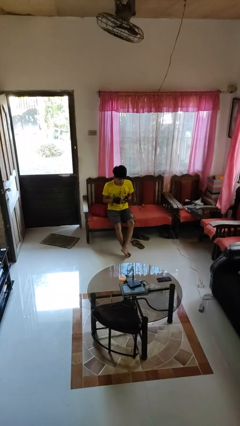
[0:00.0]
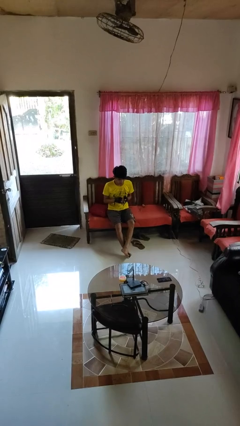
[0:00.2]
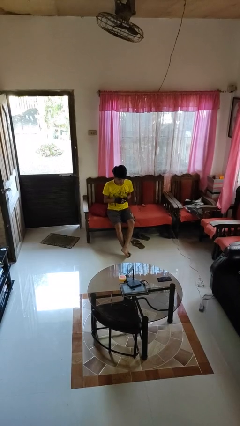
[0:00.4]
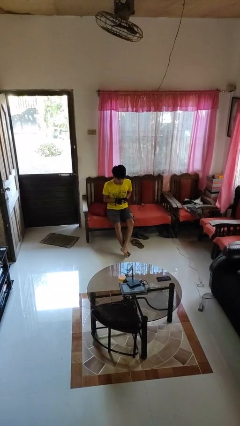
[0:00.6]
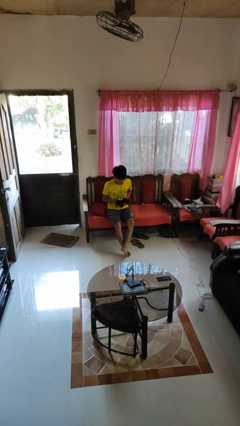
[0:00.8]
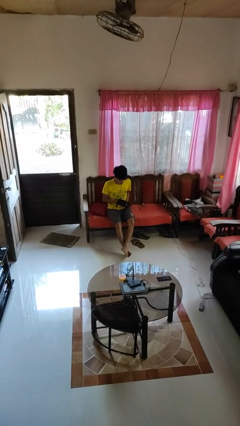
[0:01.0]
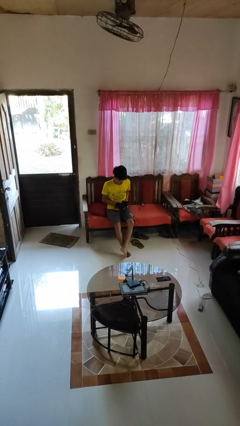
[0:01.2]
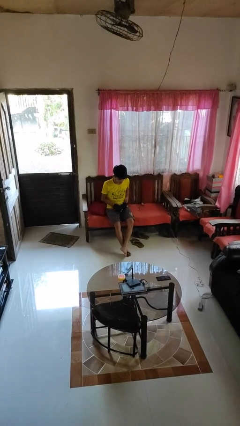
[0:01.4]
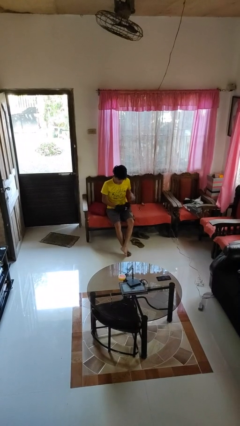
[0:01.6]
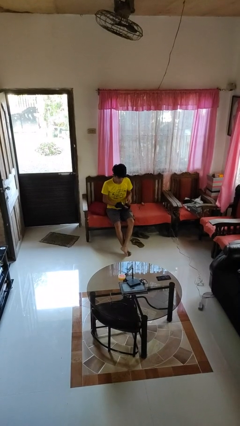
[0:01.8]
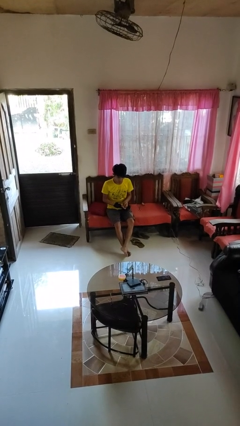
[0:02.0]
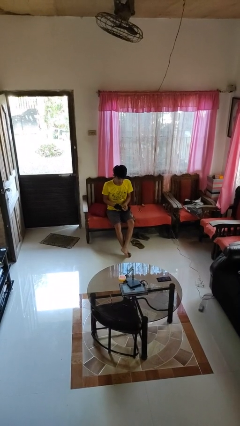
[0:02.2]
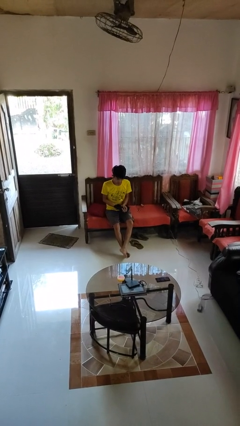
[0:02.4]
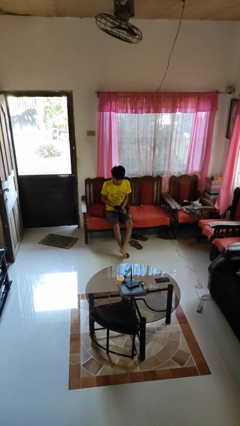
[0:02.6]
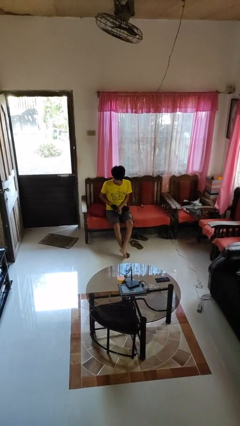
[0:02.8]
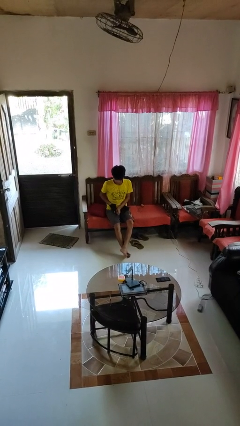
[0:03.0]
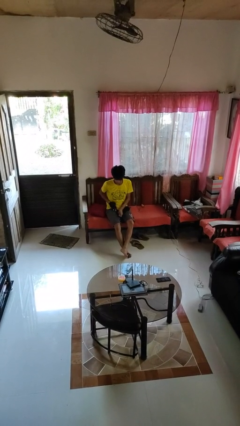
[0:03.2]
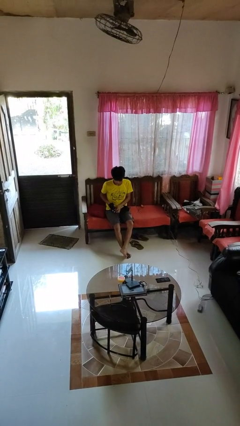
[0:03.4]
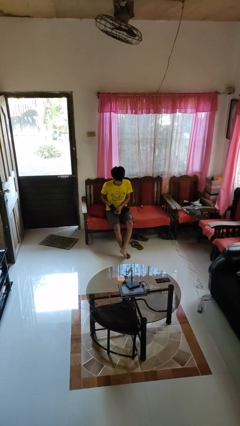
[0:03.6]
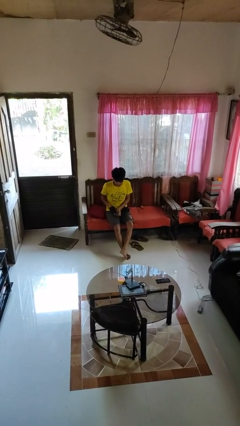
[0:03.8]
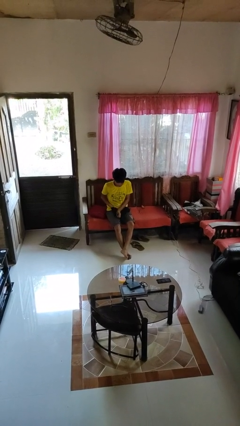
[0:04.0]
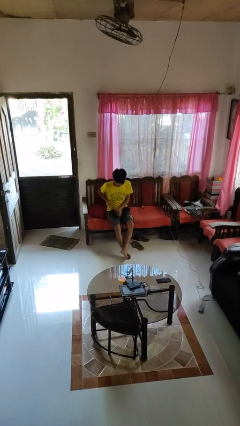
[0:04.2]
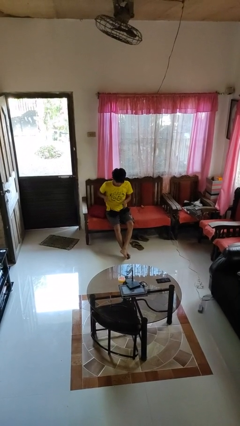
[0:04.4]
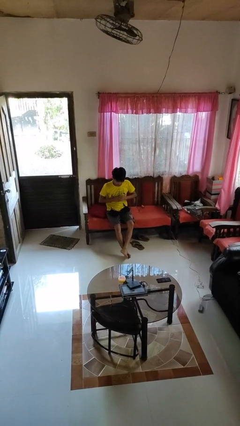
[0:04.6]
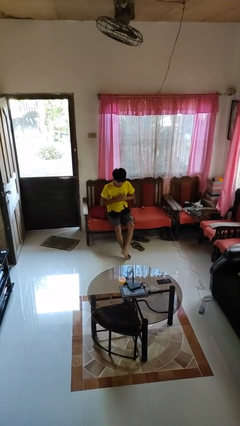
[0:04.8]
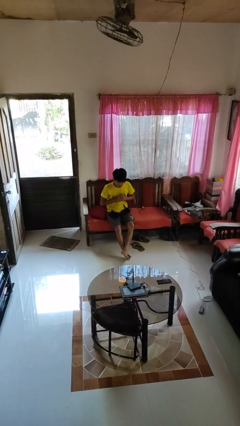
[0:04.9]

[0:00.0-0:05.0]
person takes off gloves

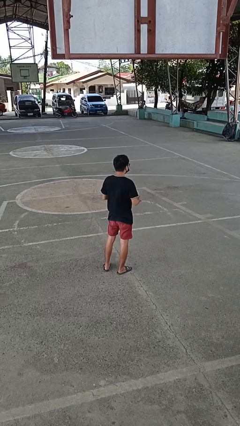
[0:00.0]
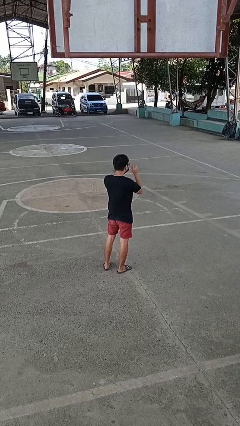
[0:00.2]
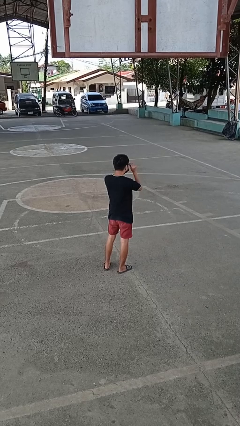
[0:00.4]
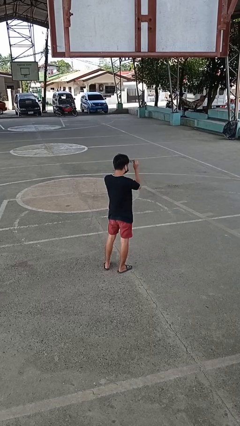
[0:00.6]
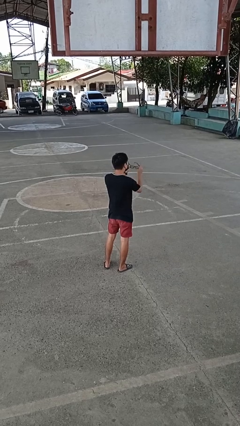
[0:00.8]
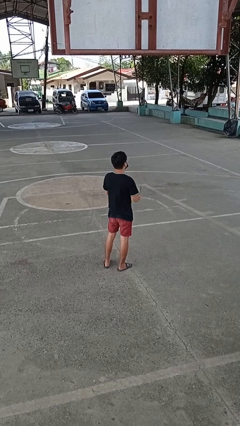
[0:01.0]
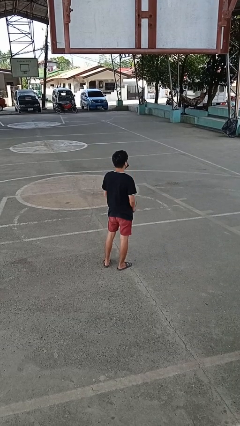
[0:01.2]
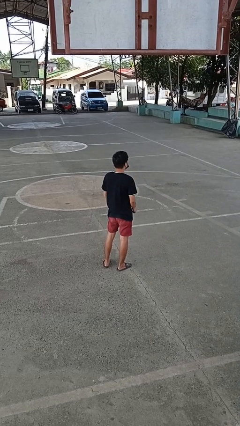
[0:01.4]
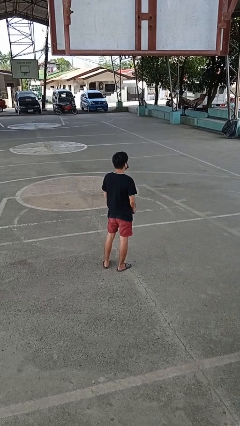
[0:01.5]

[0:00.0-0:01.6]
person takes off glasses

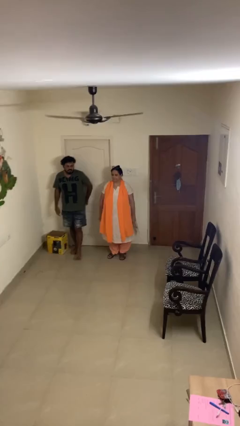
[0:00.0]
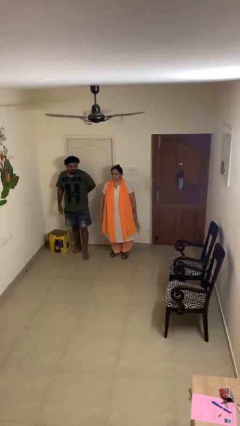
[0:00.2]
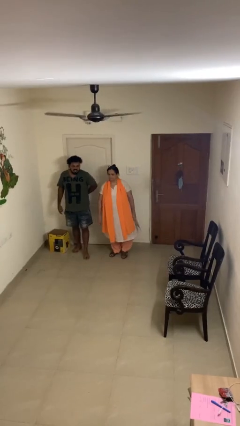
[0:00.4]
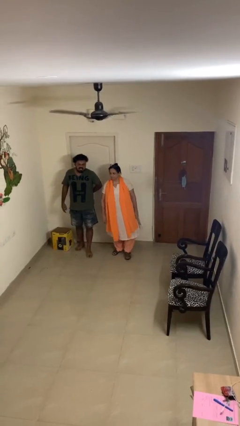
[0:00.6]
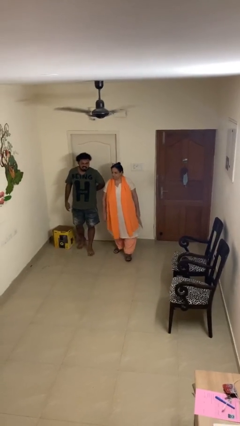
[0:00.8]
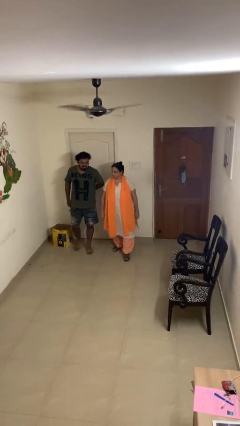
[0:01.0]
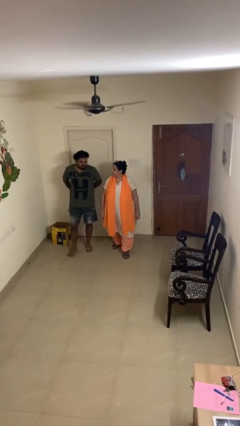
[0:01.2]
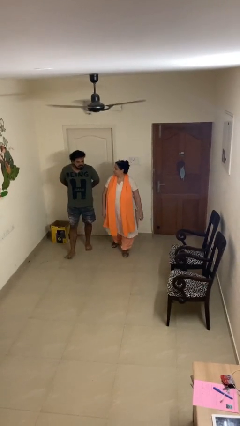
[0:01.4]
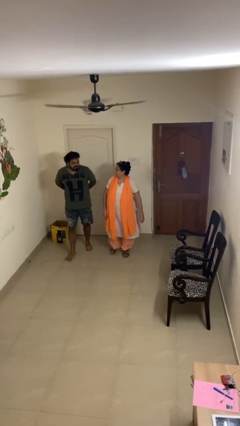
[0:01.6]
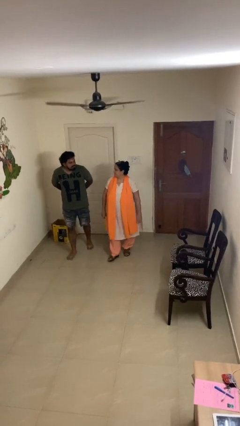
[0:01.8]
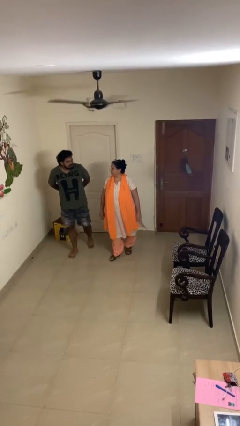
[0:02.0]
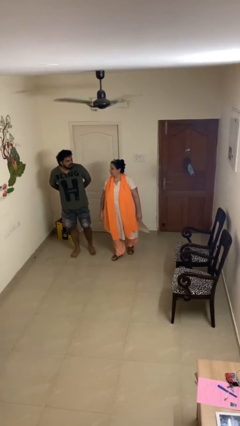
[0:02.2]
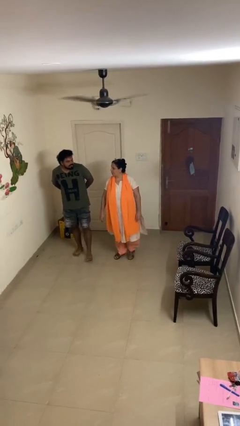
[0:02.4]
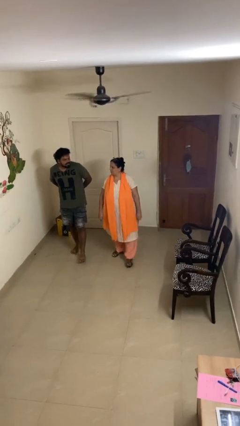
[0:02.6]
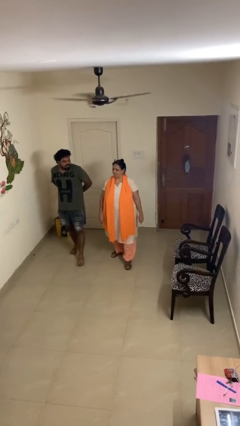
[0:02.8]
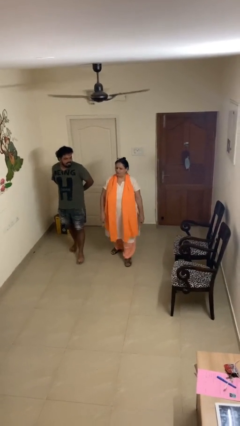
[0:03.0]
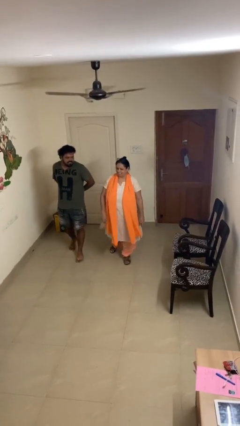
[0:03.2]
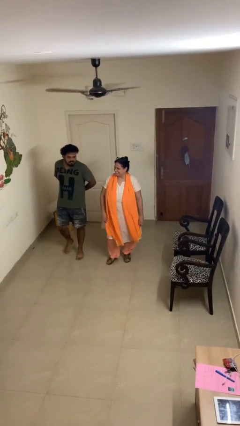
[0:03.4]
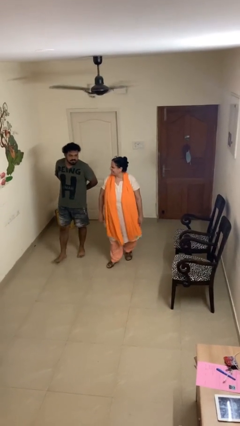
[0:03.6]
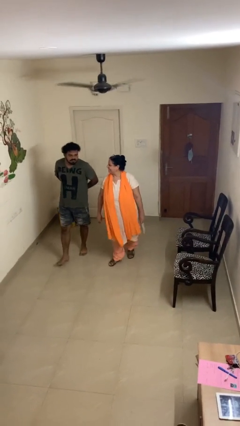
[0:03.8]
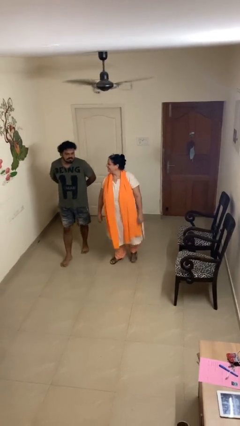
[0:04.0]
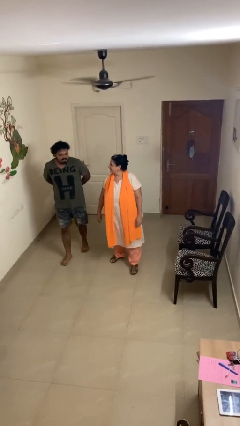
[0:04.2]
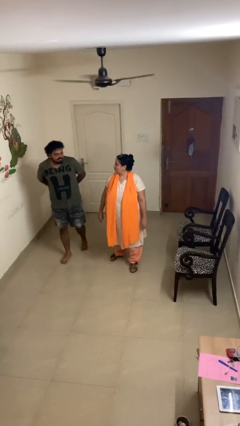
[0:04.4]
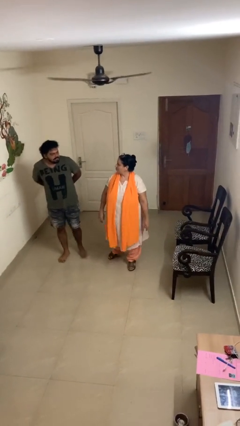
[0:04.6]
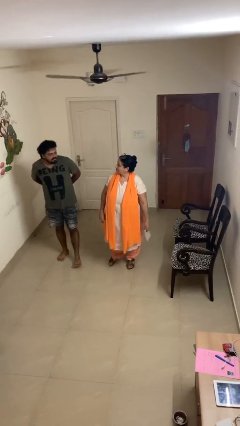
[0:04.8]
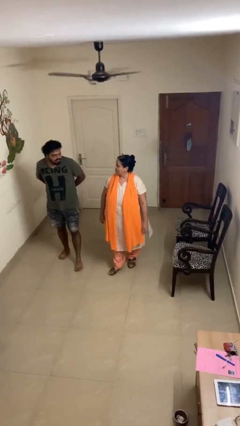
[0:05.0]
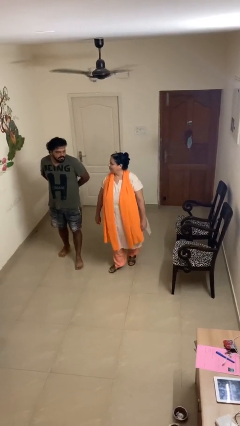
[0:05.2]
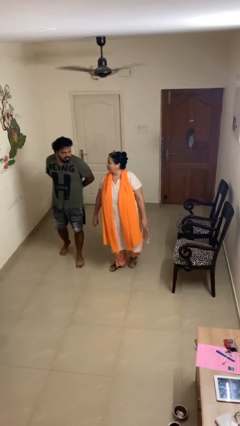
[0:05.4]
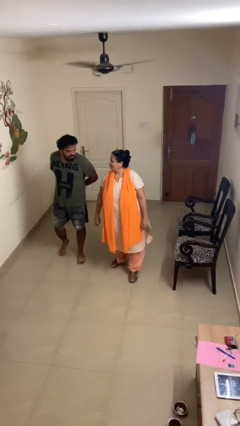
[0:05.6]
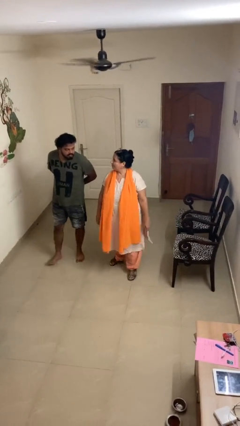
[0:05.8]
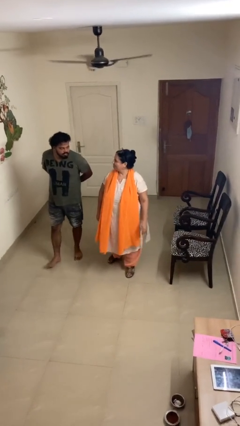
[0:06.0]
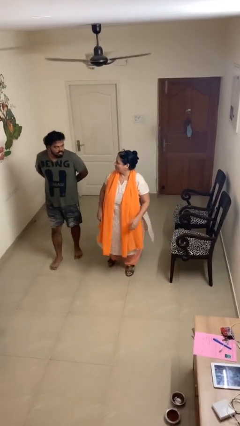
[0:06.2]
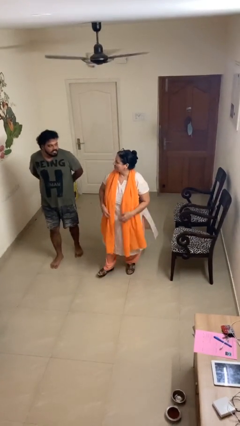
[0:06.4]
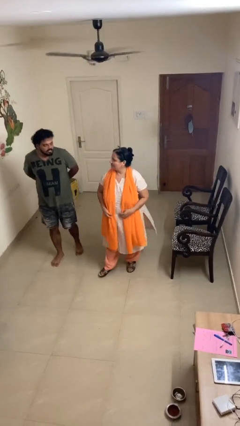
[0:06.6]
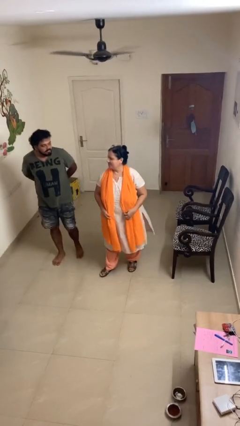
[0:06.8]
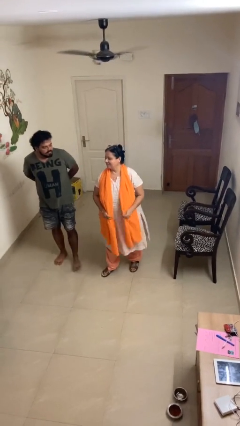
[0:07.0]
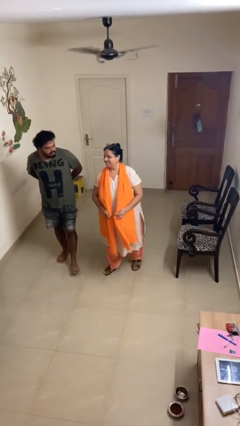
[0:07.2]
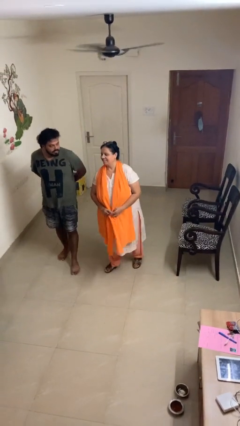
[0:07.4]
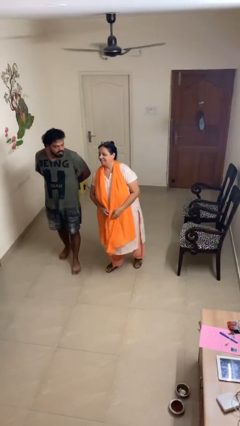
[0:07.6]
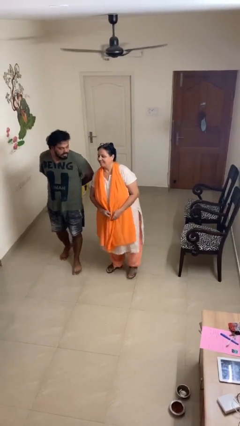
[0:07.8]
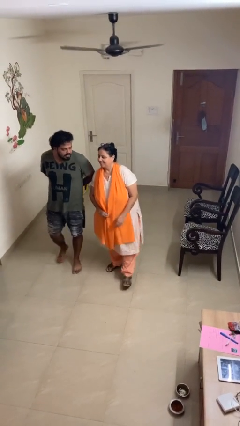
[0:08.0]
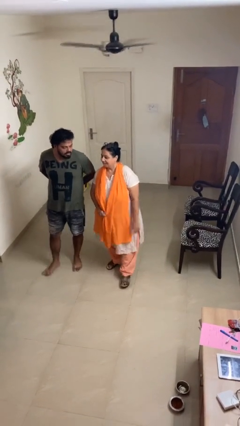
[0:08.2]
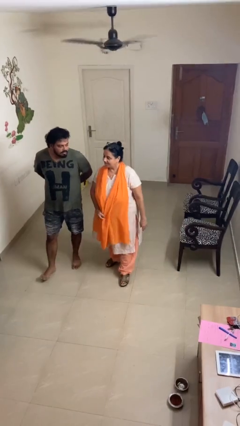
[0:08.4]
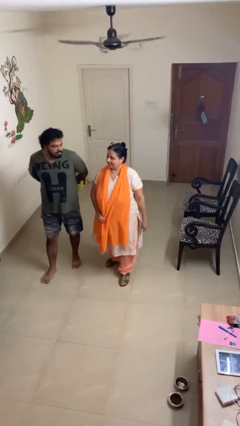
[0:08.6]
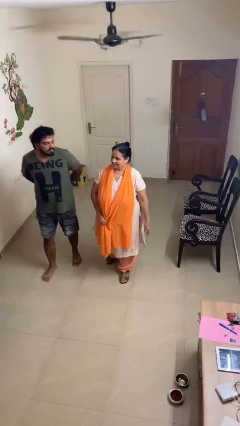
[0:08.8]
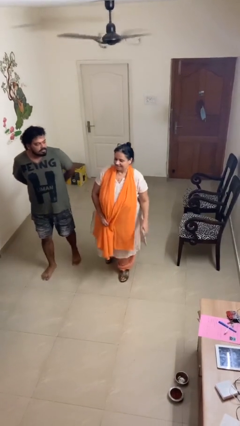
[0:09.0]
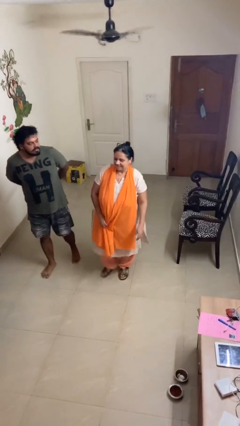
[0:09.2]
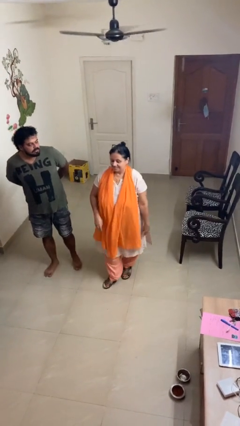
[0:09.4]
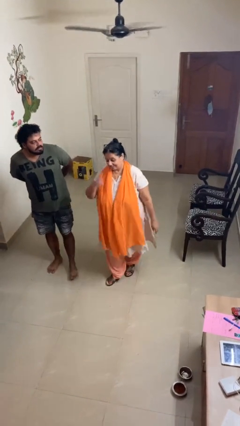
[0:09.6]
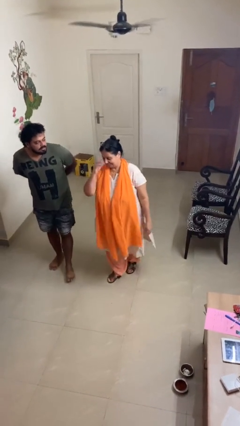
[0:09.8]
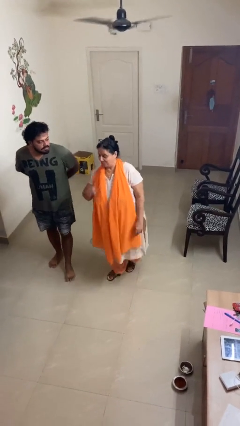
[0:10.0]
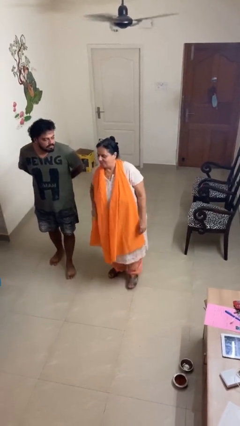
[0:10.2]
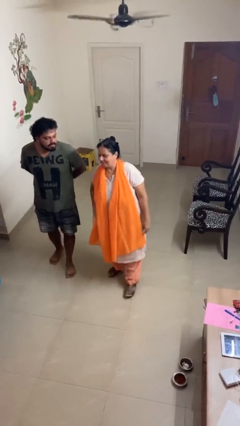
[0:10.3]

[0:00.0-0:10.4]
person talks to person

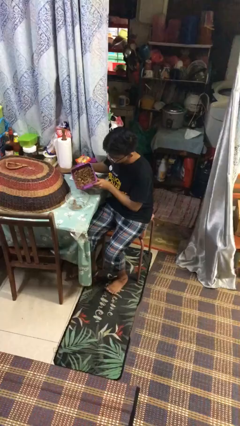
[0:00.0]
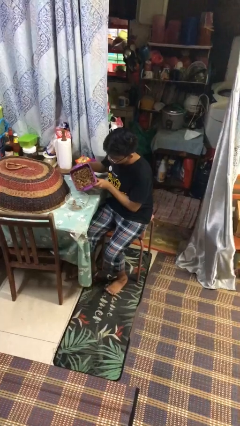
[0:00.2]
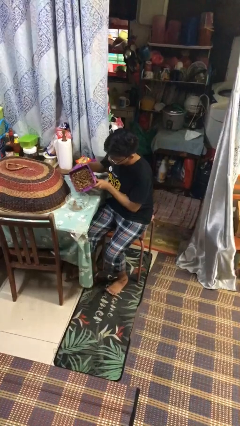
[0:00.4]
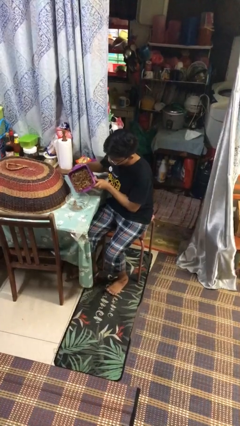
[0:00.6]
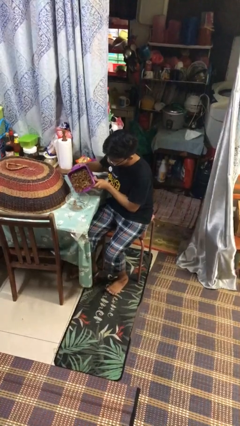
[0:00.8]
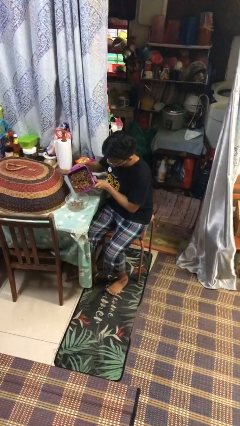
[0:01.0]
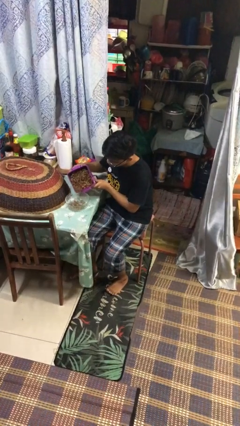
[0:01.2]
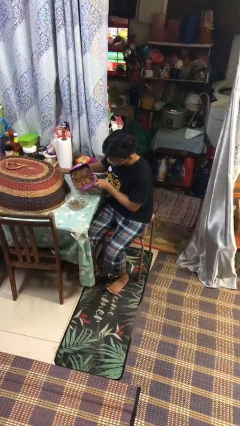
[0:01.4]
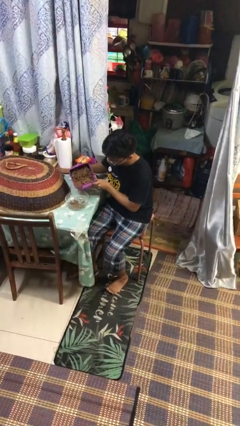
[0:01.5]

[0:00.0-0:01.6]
person pours into bowl
